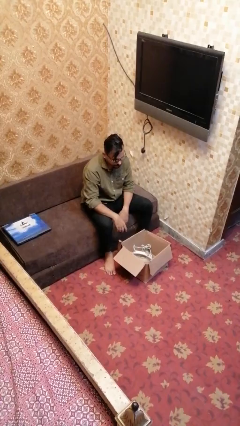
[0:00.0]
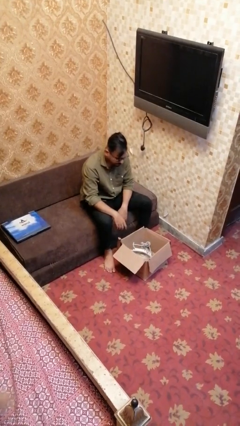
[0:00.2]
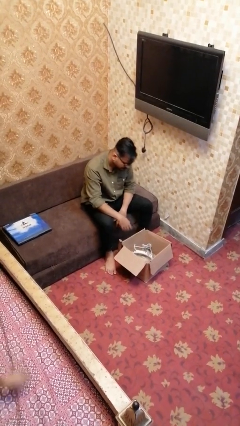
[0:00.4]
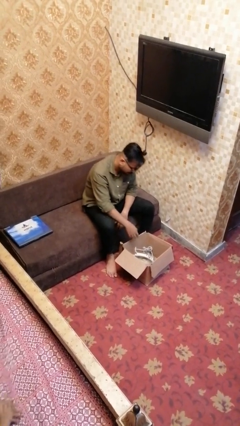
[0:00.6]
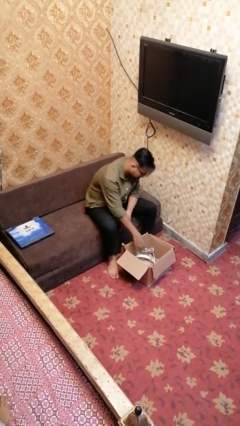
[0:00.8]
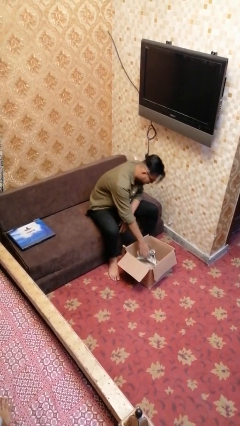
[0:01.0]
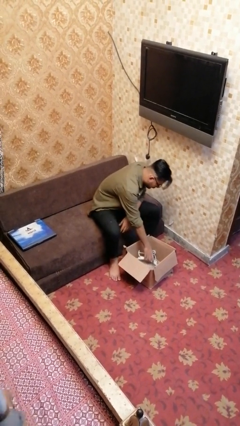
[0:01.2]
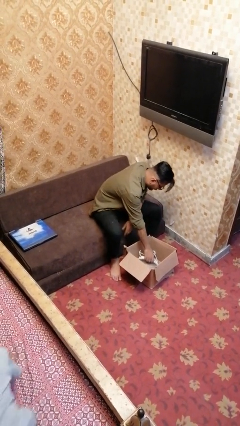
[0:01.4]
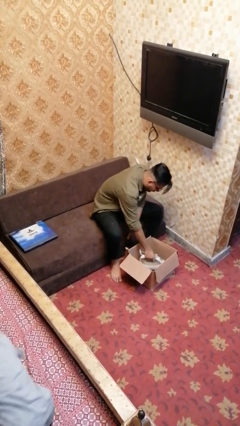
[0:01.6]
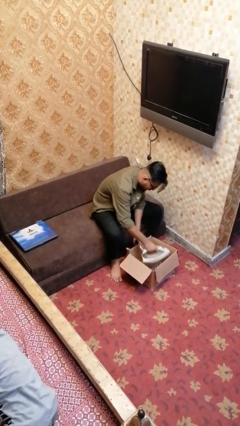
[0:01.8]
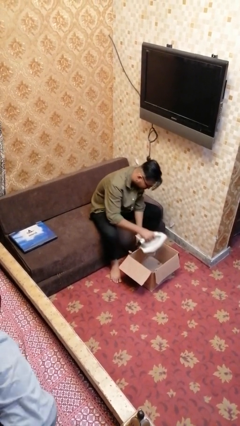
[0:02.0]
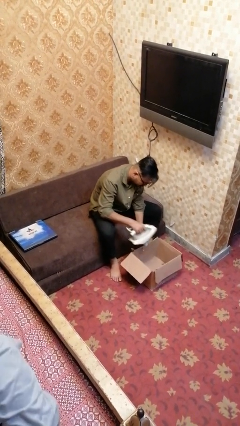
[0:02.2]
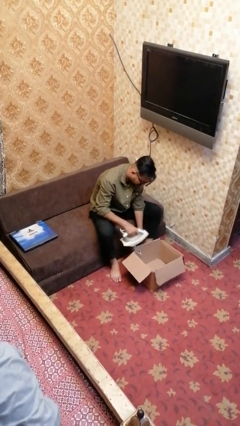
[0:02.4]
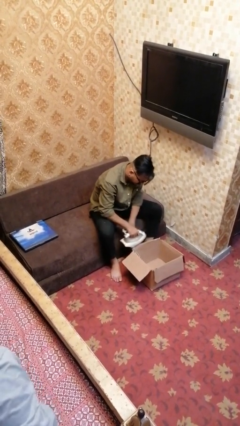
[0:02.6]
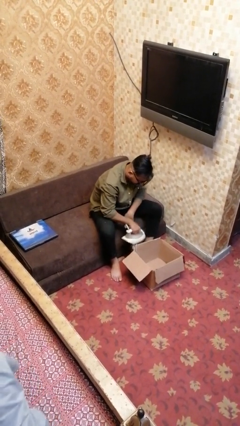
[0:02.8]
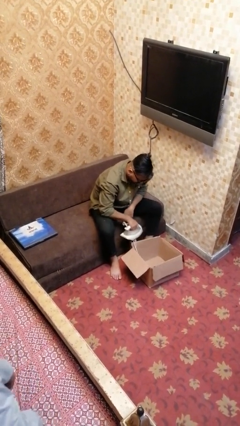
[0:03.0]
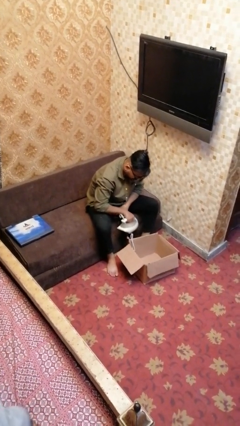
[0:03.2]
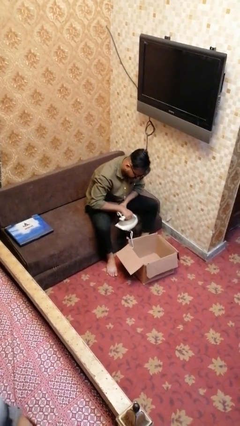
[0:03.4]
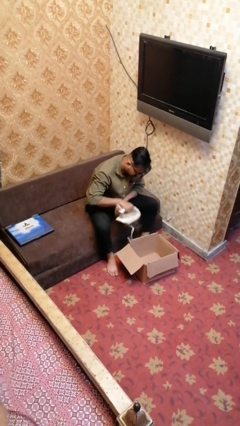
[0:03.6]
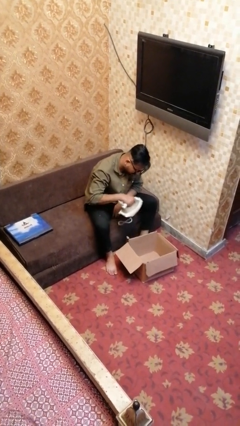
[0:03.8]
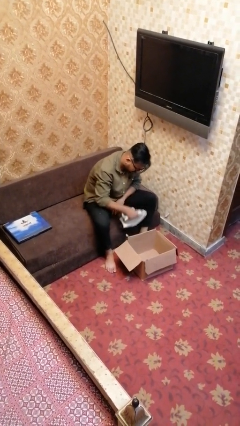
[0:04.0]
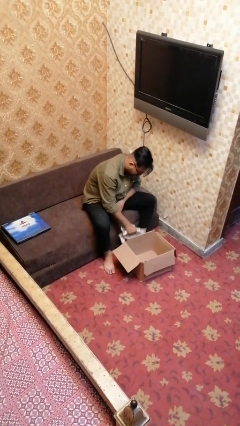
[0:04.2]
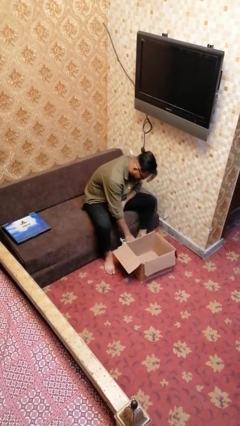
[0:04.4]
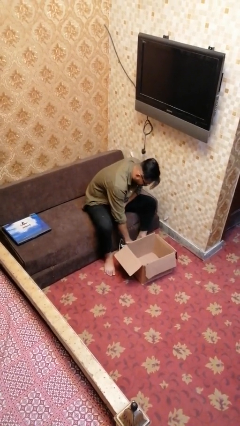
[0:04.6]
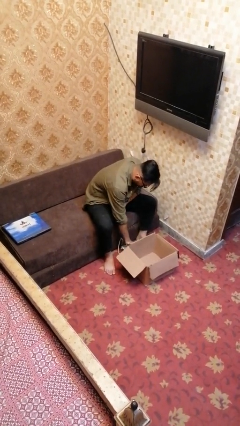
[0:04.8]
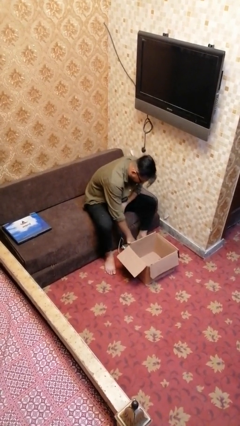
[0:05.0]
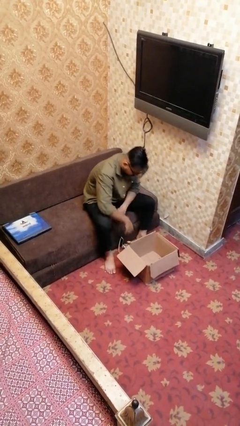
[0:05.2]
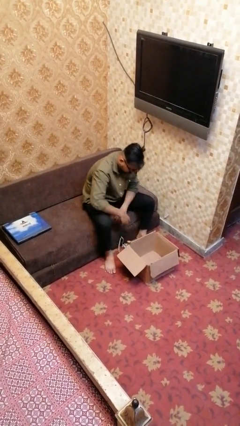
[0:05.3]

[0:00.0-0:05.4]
person takes object from box

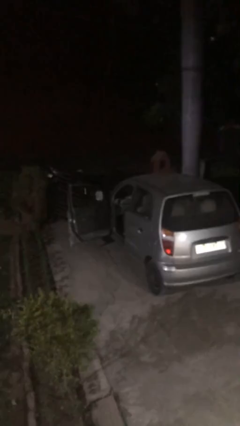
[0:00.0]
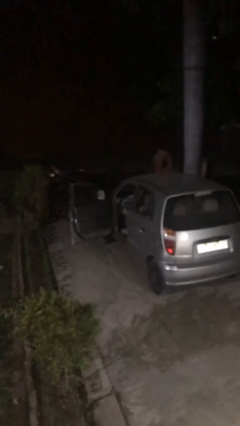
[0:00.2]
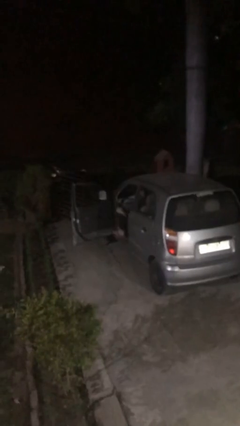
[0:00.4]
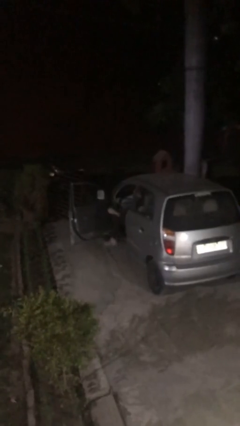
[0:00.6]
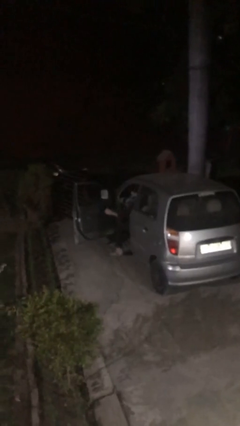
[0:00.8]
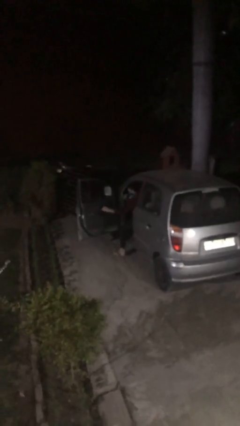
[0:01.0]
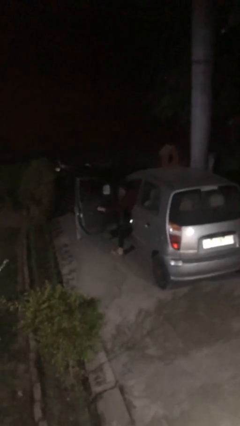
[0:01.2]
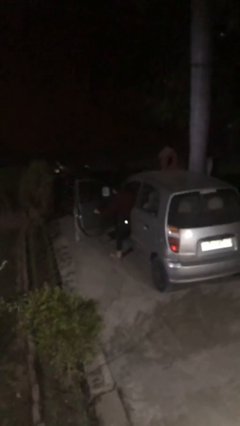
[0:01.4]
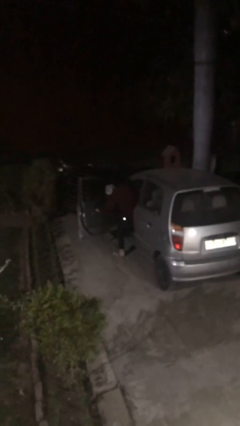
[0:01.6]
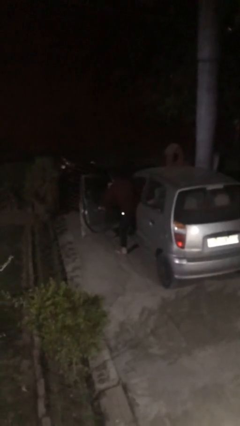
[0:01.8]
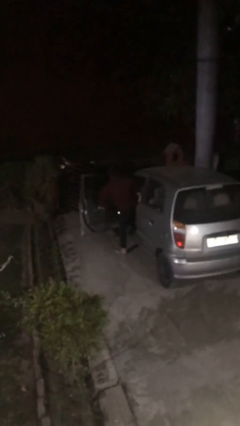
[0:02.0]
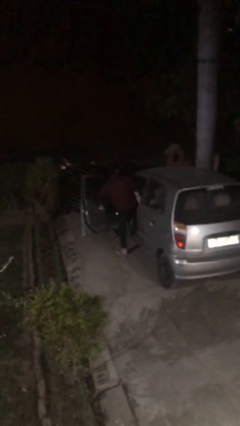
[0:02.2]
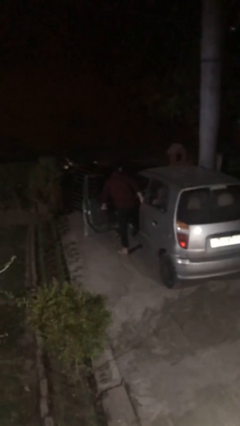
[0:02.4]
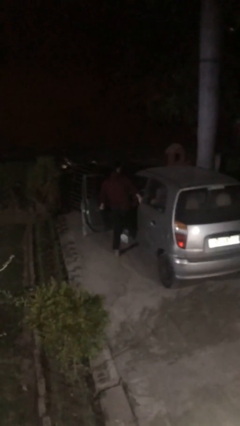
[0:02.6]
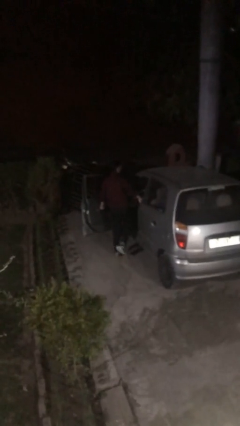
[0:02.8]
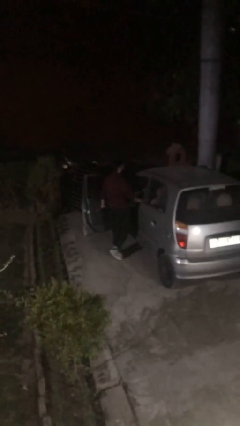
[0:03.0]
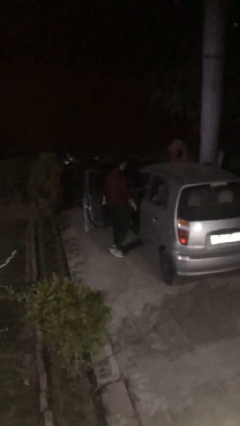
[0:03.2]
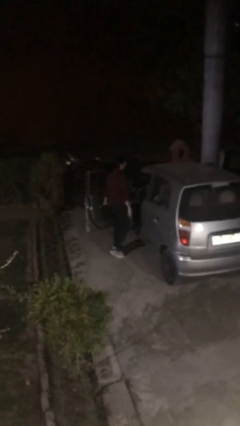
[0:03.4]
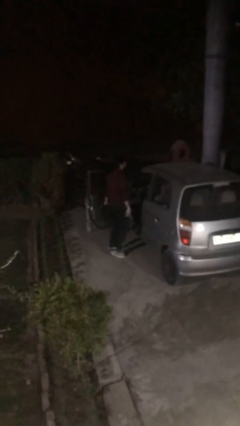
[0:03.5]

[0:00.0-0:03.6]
person exits car

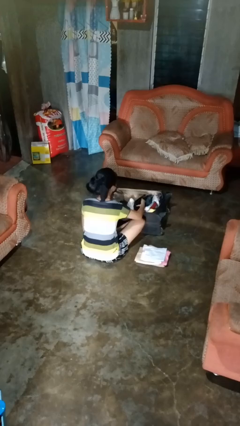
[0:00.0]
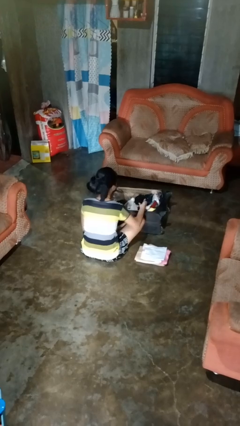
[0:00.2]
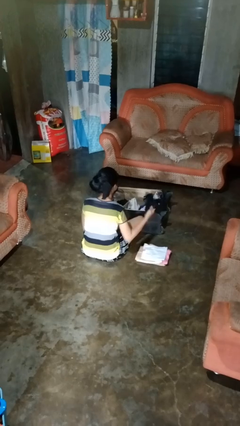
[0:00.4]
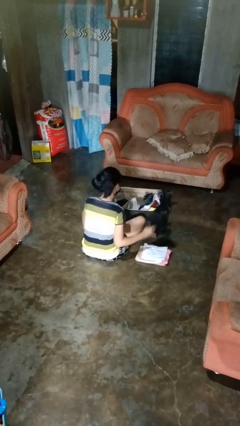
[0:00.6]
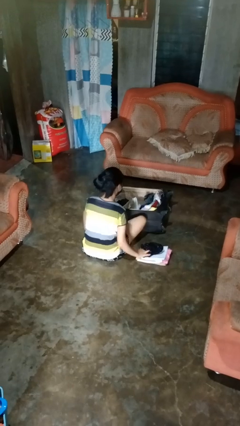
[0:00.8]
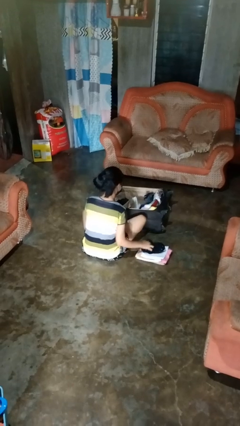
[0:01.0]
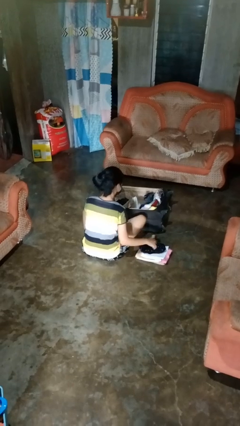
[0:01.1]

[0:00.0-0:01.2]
person unloads clothes from suitcase

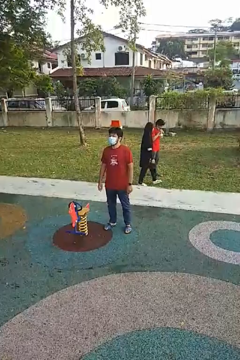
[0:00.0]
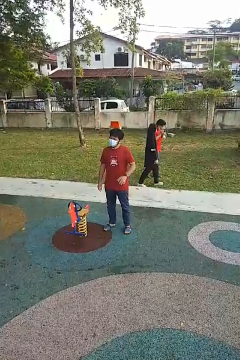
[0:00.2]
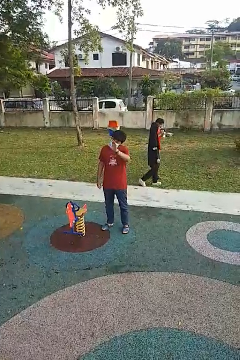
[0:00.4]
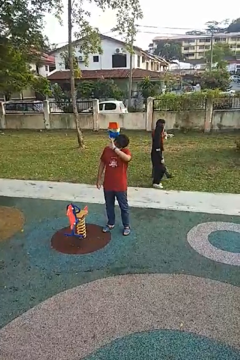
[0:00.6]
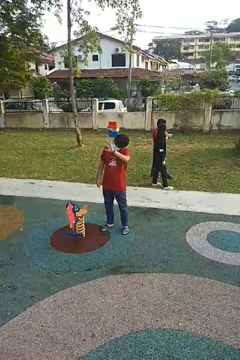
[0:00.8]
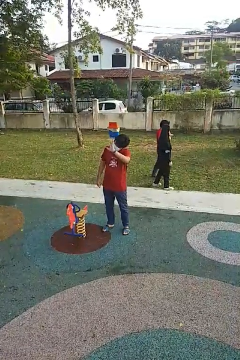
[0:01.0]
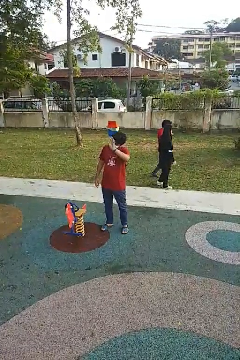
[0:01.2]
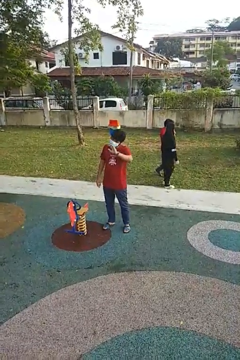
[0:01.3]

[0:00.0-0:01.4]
person waves at person

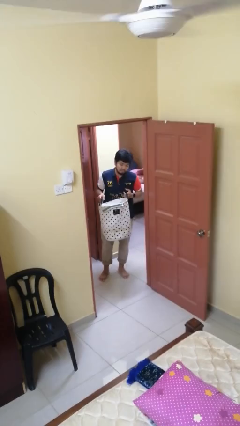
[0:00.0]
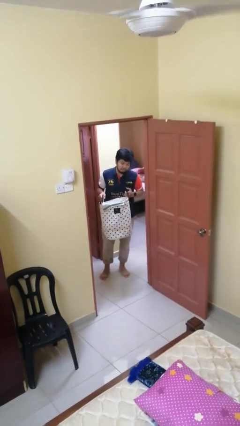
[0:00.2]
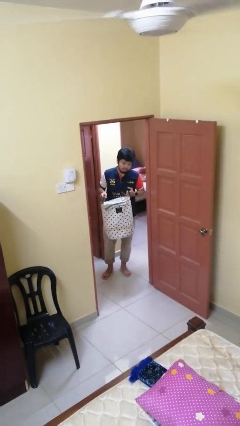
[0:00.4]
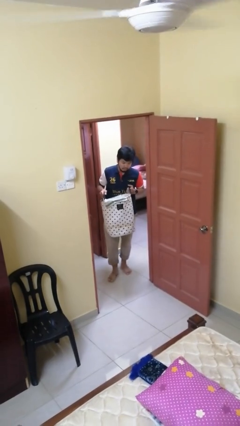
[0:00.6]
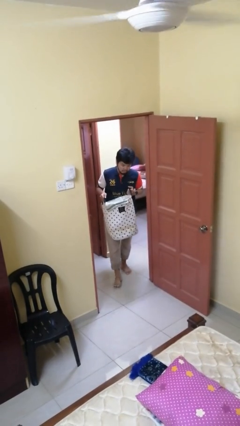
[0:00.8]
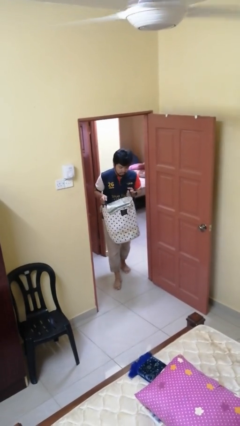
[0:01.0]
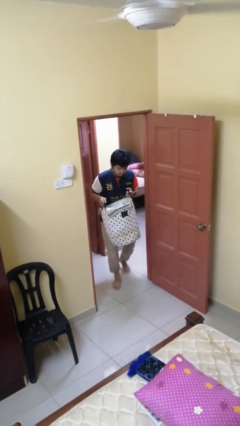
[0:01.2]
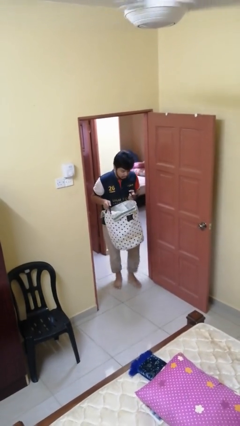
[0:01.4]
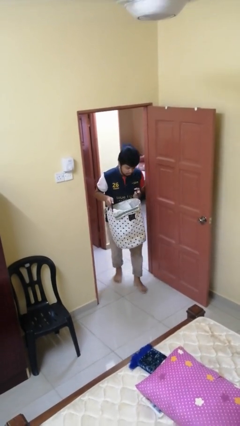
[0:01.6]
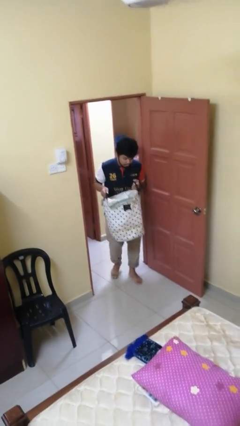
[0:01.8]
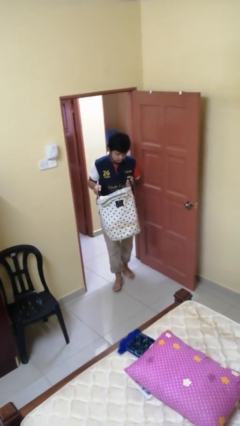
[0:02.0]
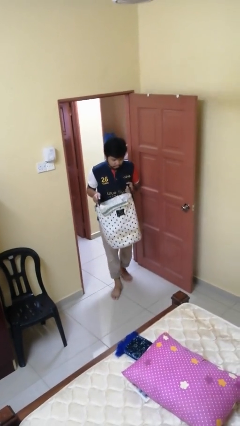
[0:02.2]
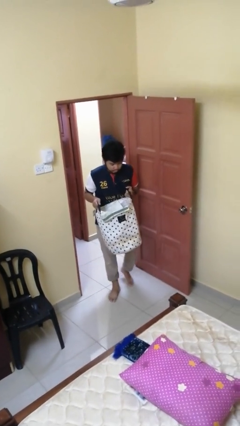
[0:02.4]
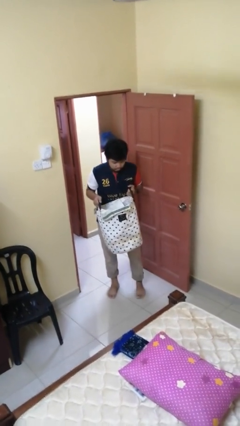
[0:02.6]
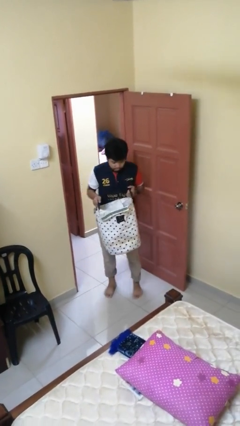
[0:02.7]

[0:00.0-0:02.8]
person carries laundry basket

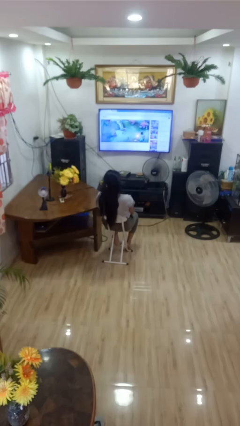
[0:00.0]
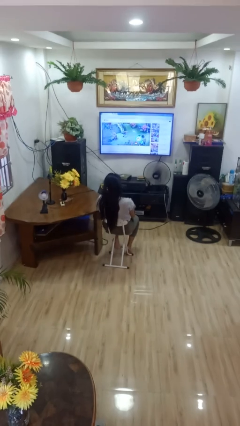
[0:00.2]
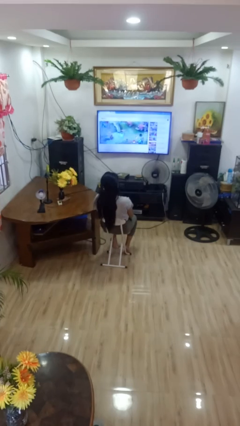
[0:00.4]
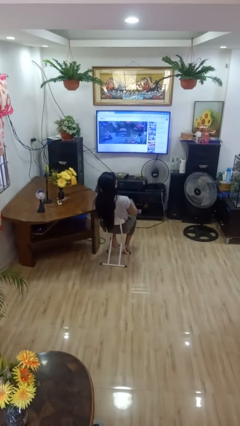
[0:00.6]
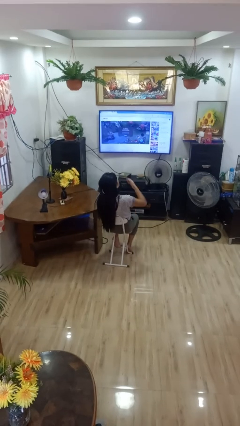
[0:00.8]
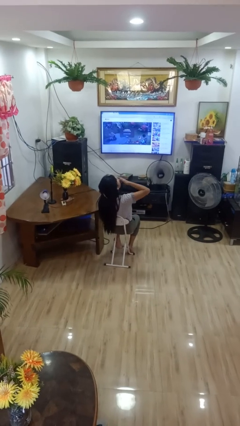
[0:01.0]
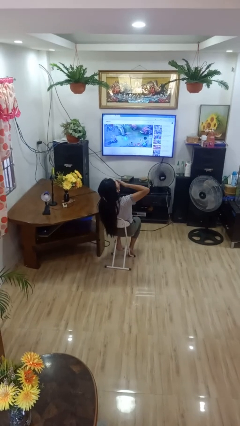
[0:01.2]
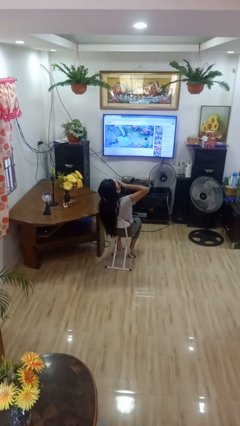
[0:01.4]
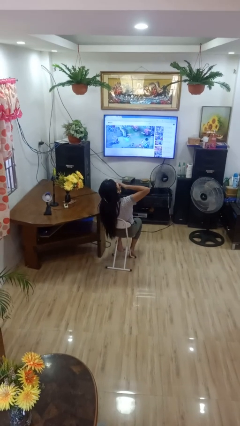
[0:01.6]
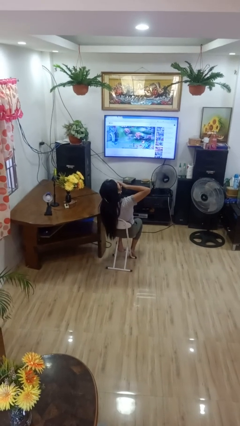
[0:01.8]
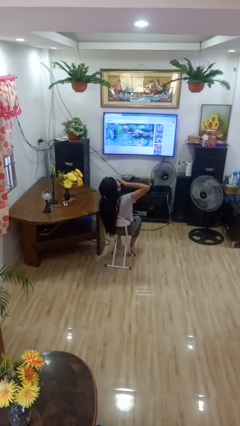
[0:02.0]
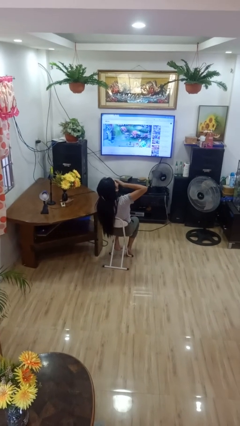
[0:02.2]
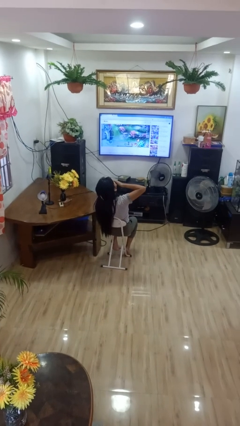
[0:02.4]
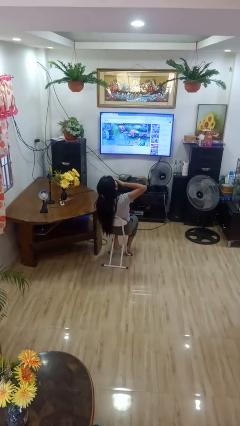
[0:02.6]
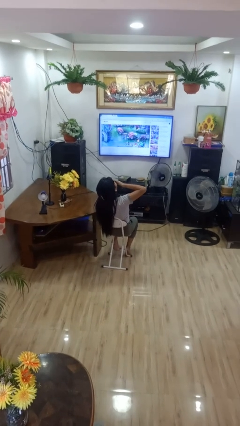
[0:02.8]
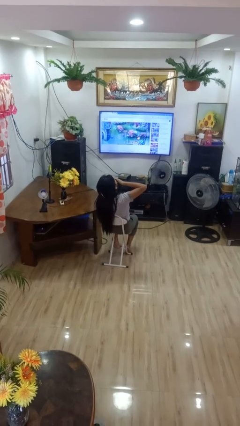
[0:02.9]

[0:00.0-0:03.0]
person yawns
